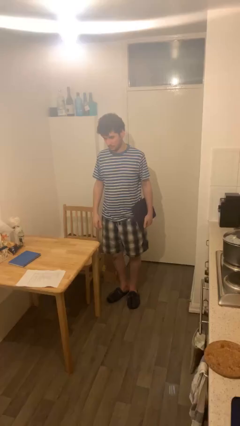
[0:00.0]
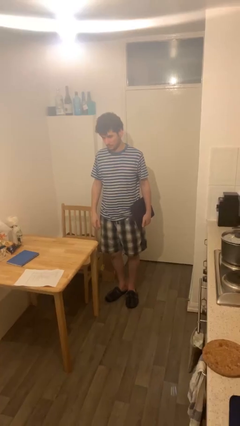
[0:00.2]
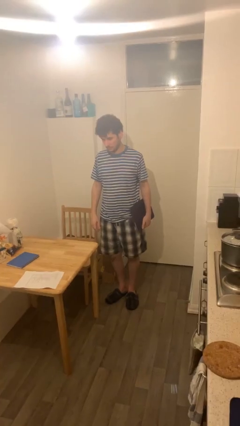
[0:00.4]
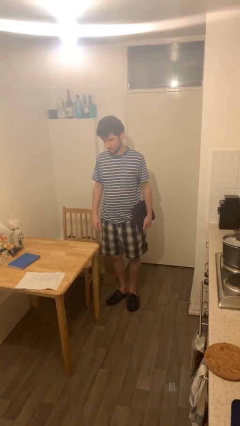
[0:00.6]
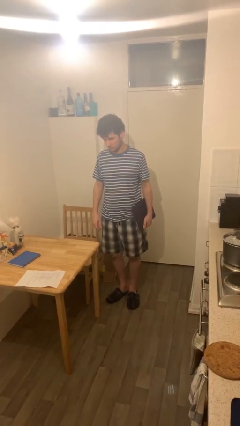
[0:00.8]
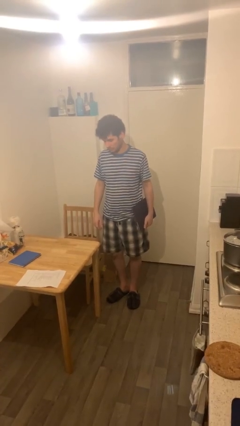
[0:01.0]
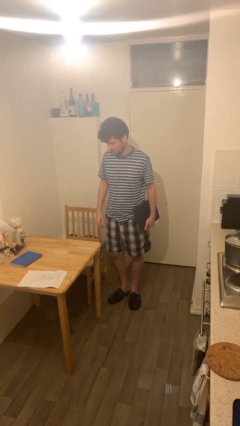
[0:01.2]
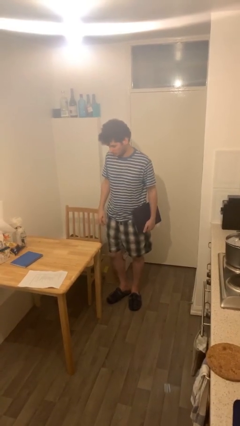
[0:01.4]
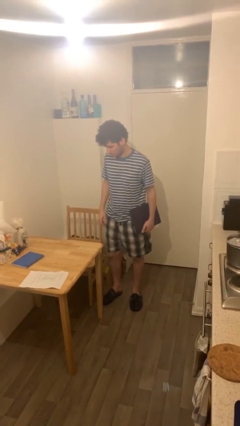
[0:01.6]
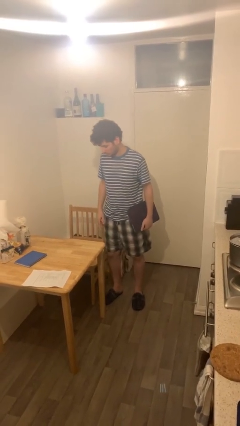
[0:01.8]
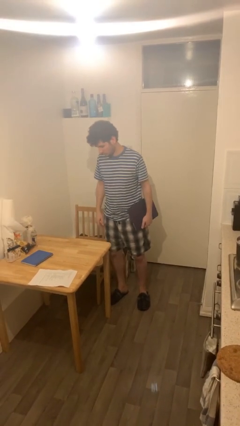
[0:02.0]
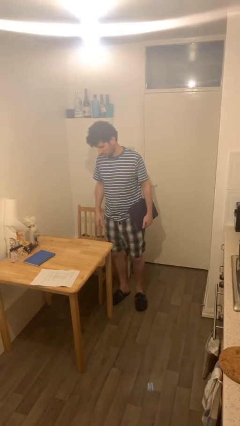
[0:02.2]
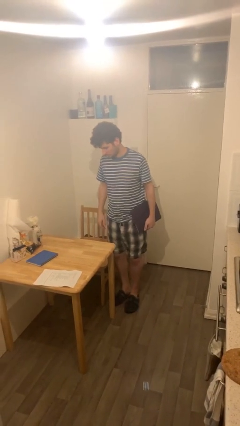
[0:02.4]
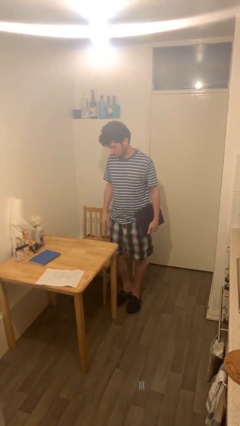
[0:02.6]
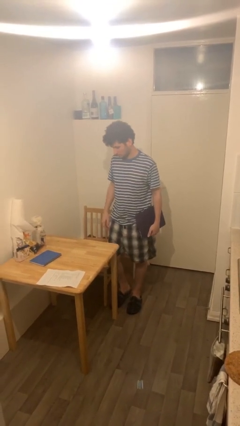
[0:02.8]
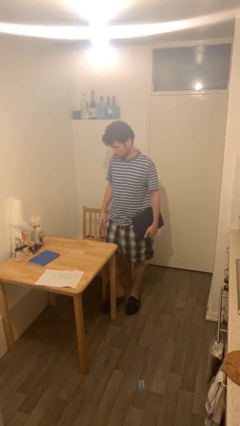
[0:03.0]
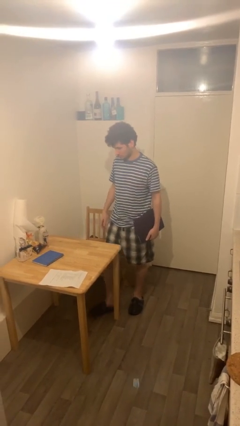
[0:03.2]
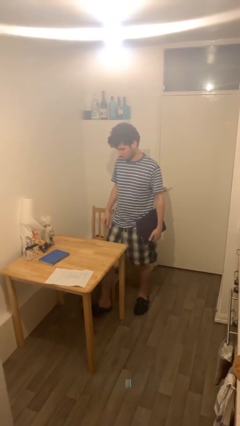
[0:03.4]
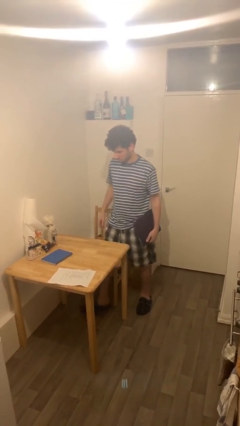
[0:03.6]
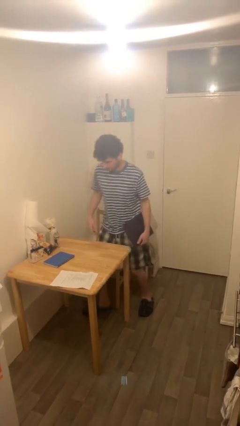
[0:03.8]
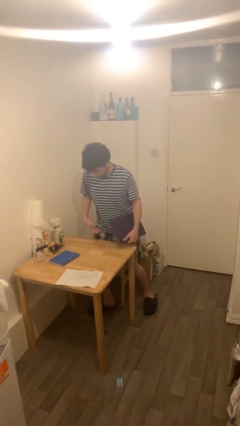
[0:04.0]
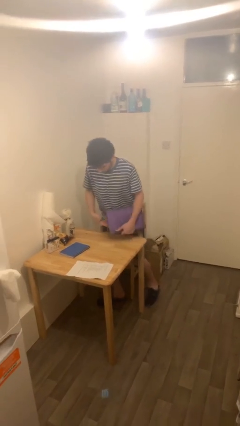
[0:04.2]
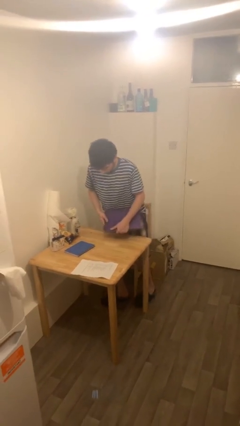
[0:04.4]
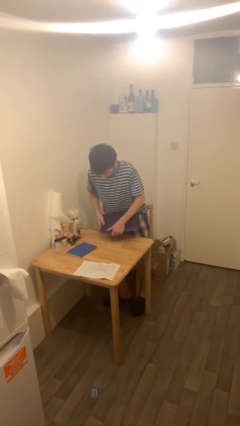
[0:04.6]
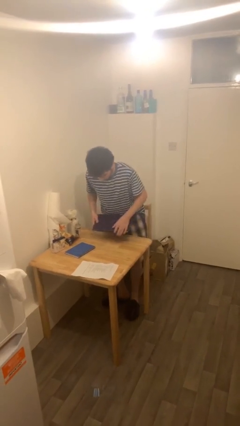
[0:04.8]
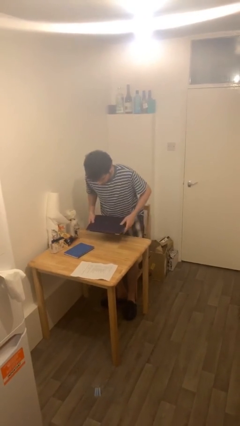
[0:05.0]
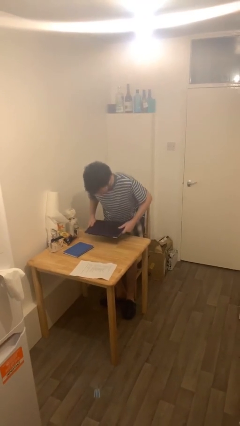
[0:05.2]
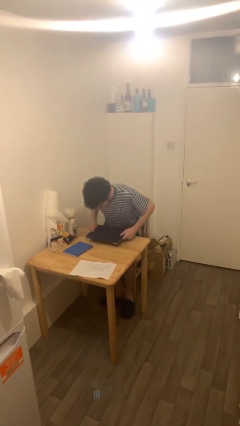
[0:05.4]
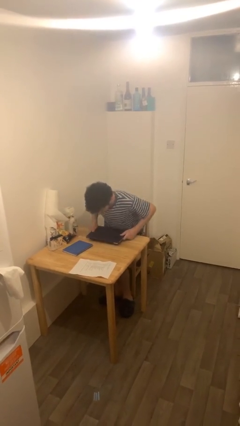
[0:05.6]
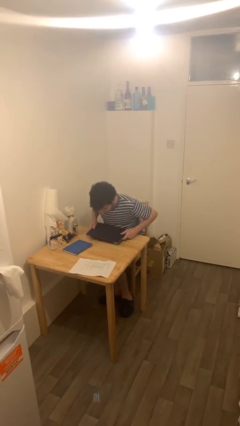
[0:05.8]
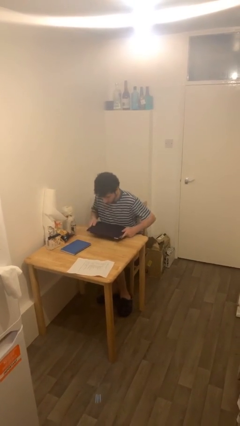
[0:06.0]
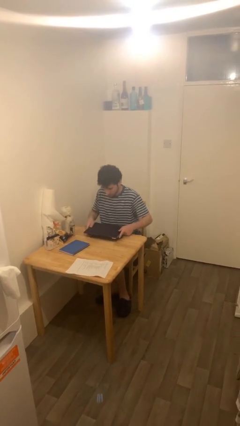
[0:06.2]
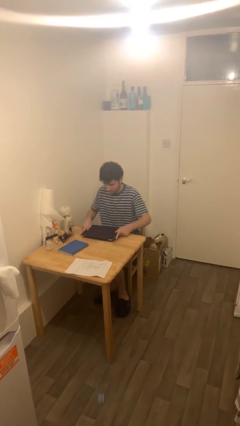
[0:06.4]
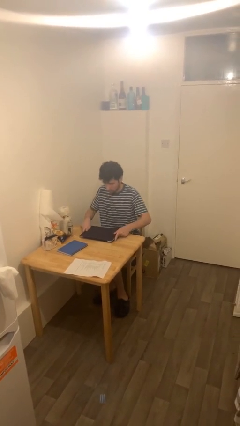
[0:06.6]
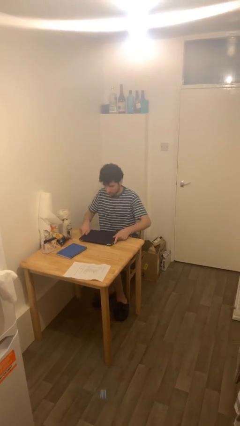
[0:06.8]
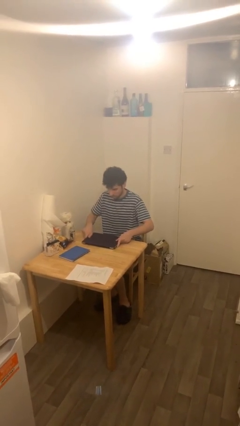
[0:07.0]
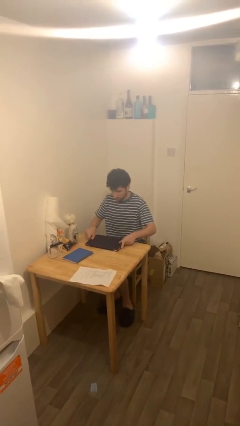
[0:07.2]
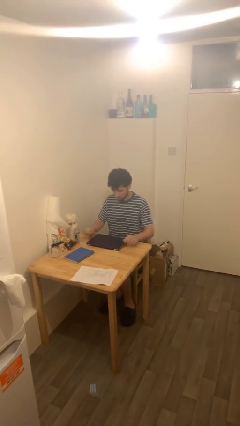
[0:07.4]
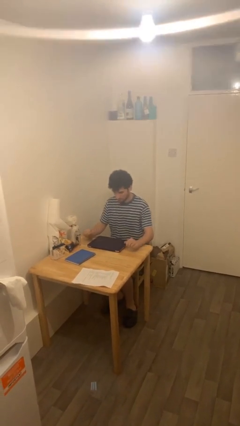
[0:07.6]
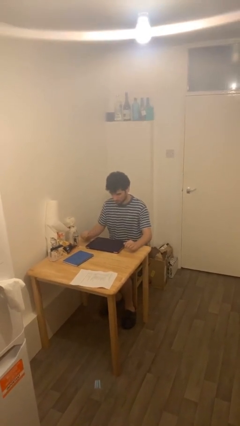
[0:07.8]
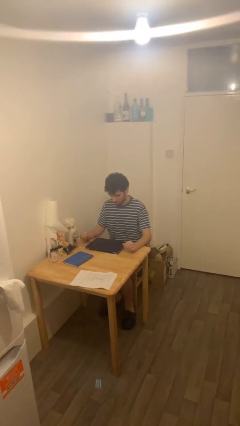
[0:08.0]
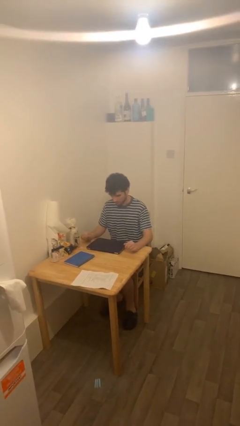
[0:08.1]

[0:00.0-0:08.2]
person sits down

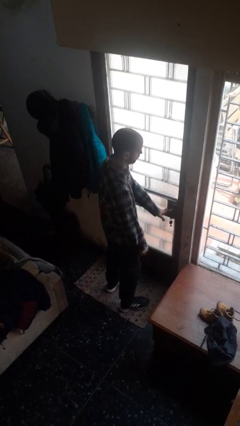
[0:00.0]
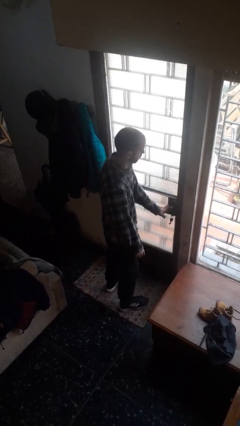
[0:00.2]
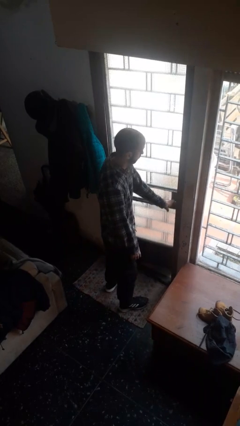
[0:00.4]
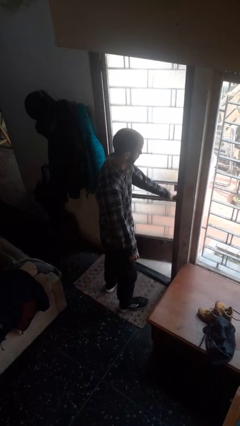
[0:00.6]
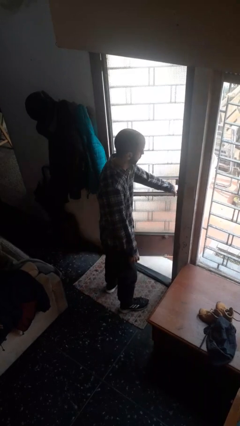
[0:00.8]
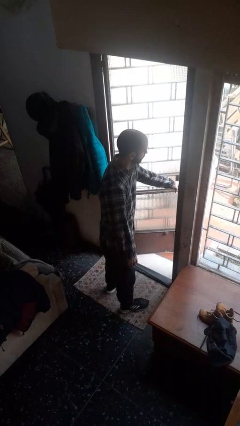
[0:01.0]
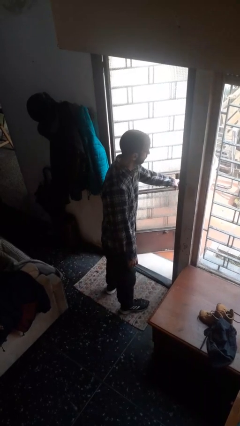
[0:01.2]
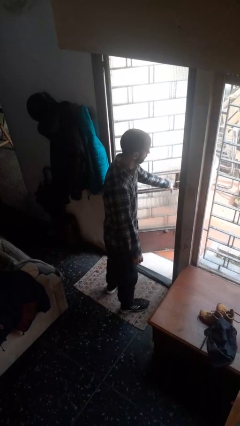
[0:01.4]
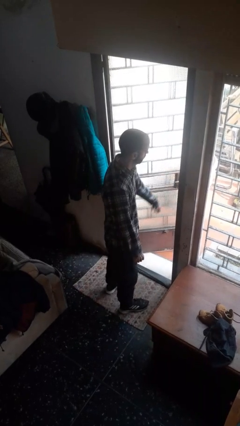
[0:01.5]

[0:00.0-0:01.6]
person opens facility door

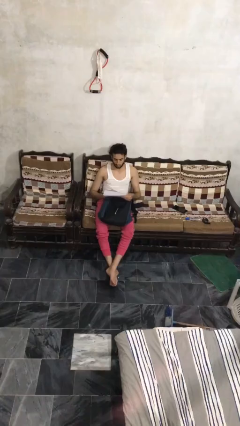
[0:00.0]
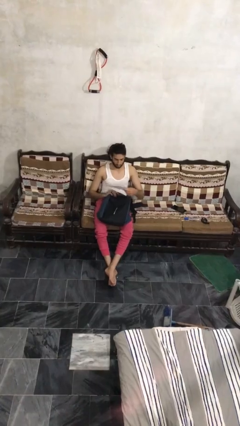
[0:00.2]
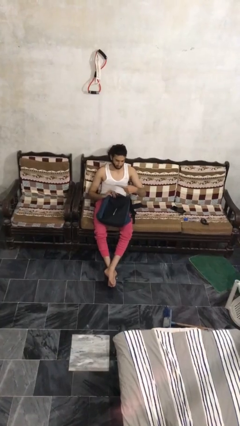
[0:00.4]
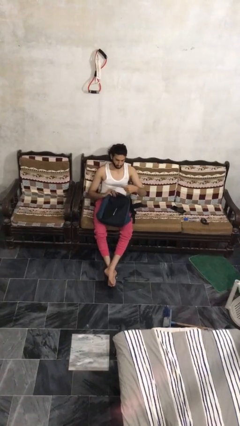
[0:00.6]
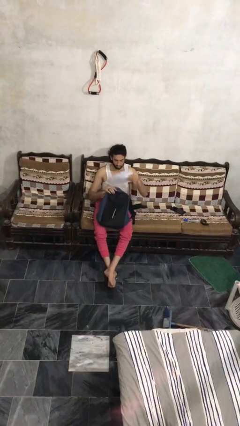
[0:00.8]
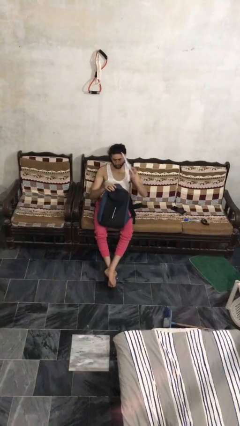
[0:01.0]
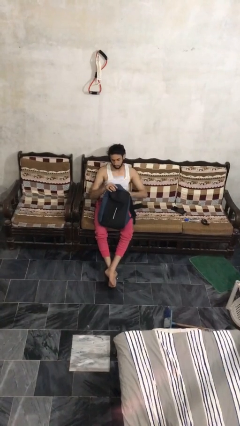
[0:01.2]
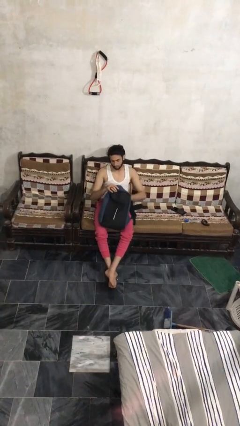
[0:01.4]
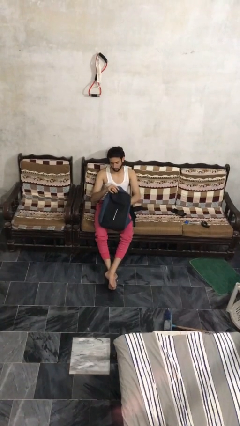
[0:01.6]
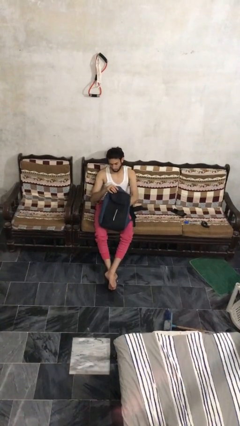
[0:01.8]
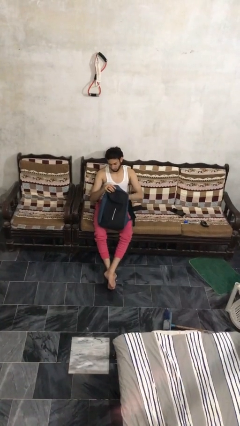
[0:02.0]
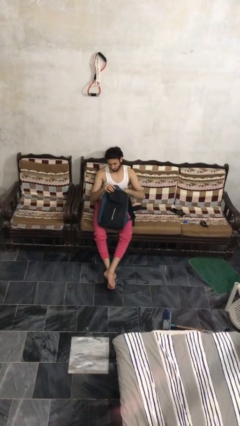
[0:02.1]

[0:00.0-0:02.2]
person puts object into backpack

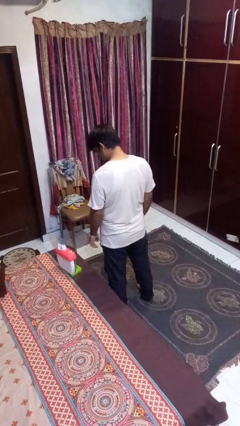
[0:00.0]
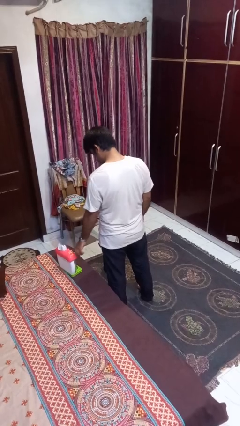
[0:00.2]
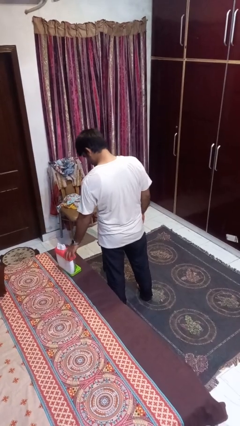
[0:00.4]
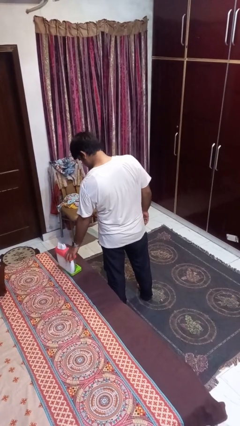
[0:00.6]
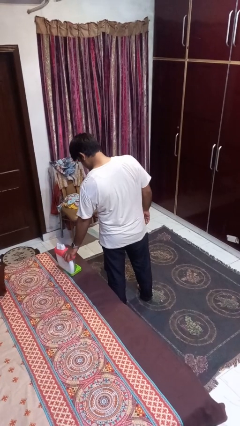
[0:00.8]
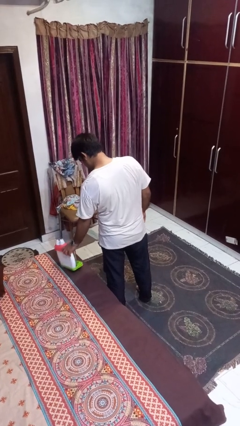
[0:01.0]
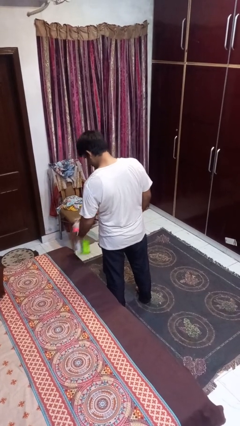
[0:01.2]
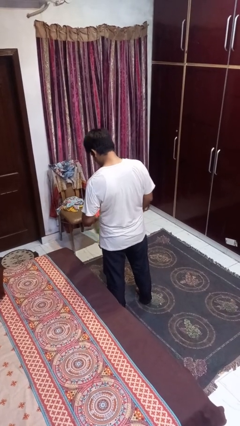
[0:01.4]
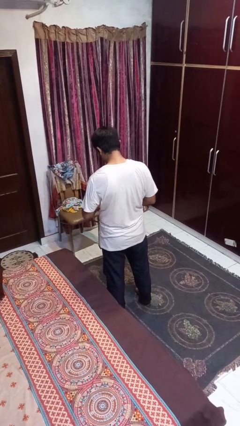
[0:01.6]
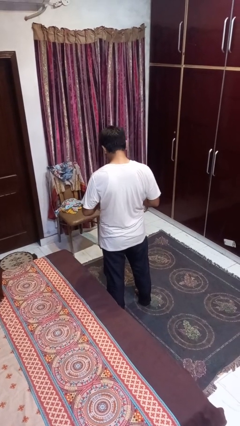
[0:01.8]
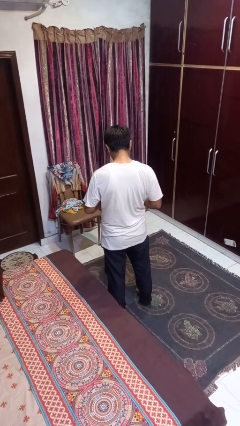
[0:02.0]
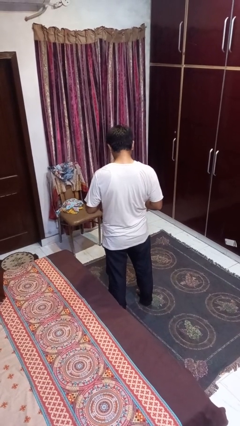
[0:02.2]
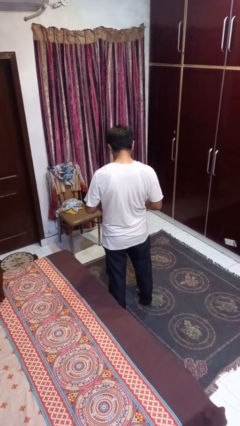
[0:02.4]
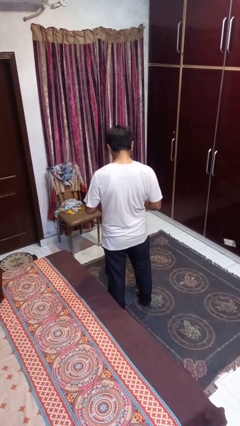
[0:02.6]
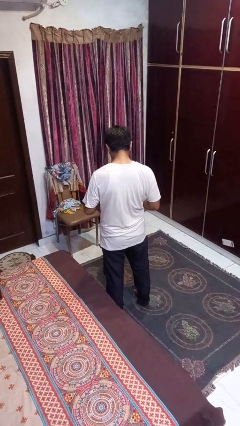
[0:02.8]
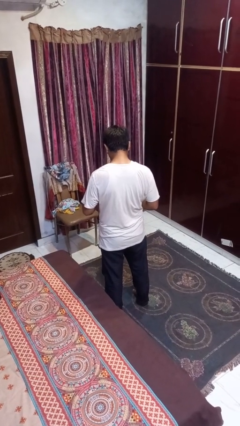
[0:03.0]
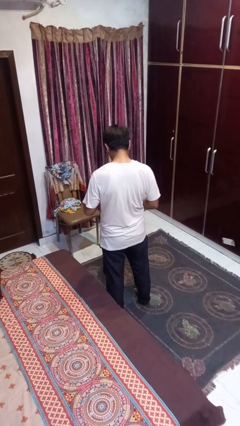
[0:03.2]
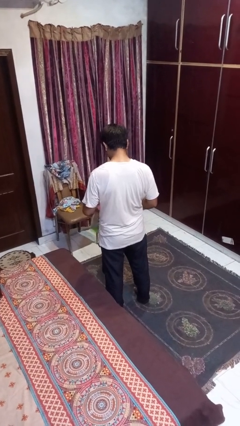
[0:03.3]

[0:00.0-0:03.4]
person picks up object from bed

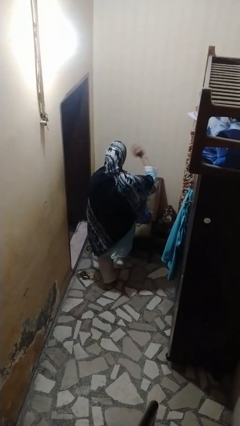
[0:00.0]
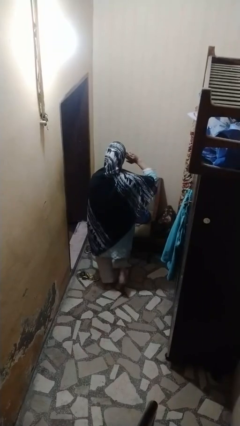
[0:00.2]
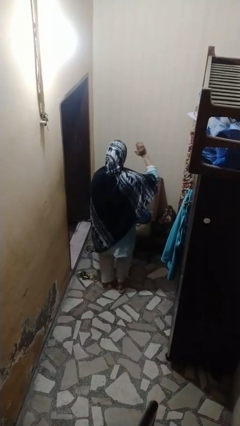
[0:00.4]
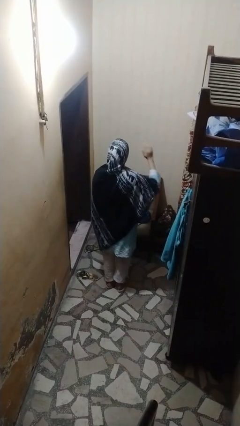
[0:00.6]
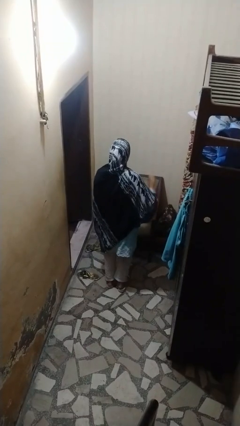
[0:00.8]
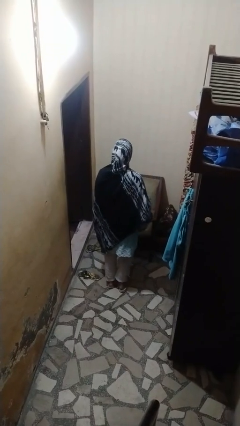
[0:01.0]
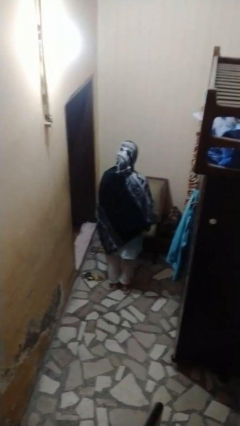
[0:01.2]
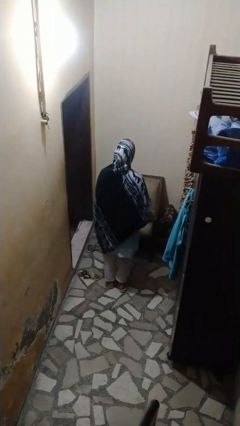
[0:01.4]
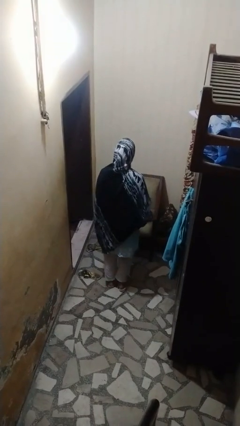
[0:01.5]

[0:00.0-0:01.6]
person salutes

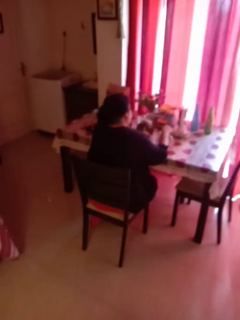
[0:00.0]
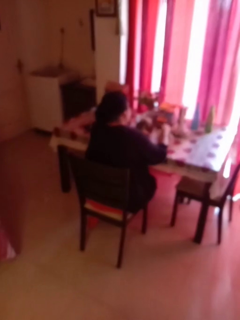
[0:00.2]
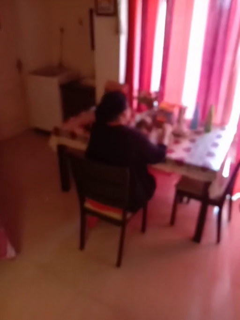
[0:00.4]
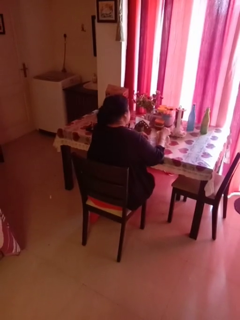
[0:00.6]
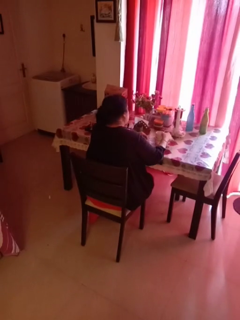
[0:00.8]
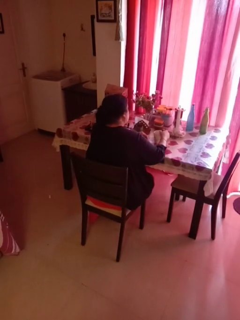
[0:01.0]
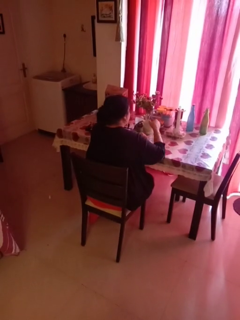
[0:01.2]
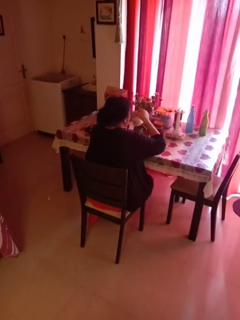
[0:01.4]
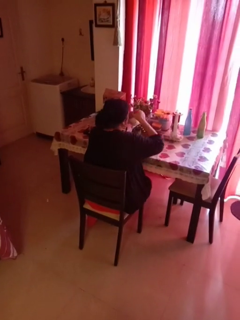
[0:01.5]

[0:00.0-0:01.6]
person stirs mug
